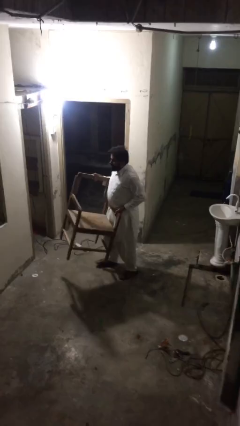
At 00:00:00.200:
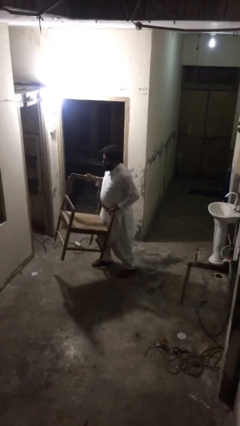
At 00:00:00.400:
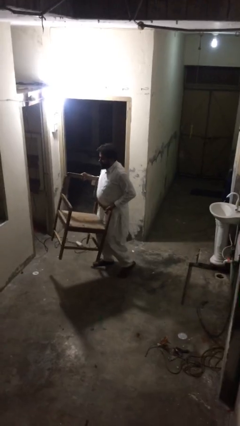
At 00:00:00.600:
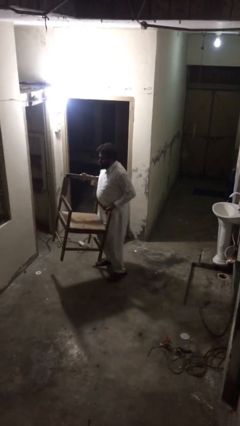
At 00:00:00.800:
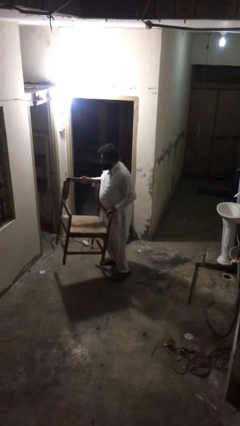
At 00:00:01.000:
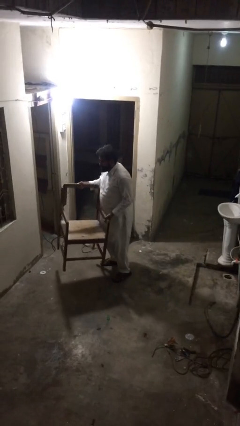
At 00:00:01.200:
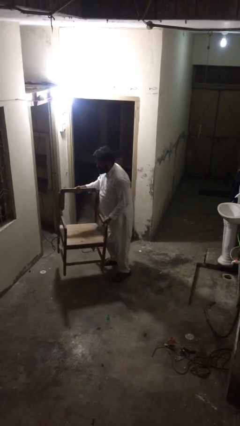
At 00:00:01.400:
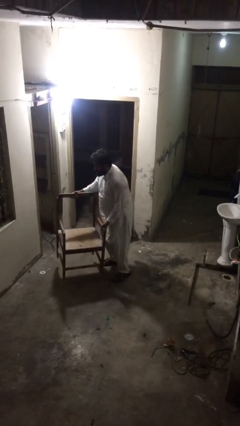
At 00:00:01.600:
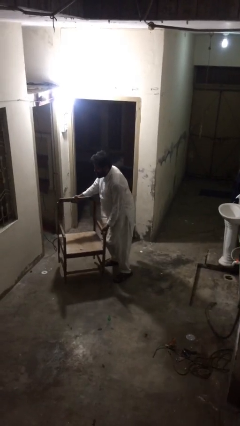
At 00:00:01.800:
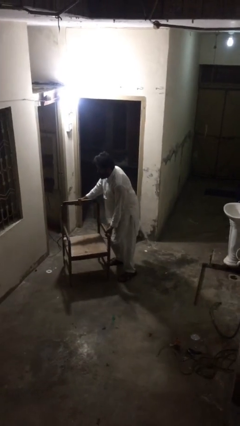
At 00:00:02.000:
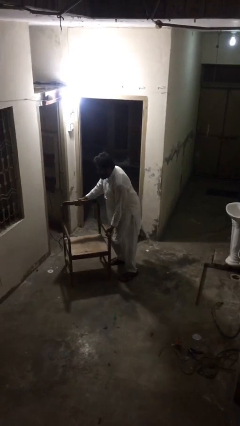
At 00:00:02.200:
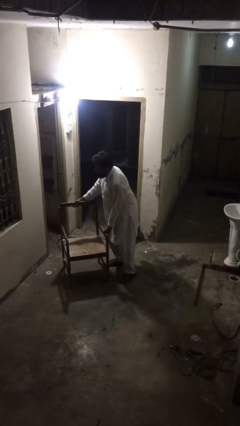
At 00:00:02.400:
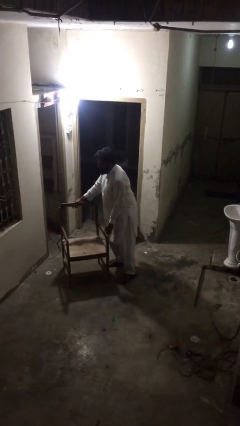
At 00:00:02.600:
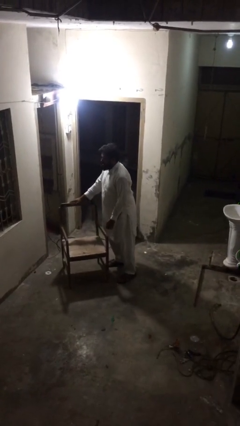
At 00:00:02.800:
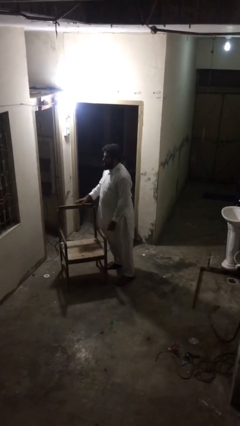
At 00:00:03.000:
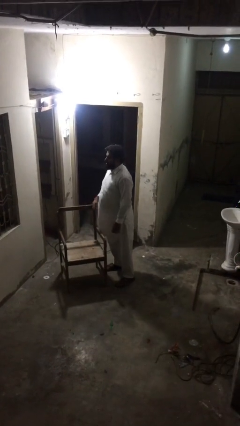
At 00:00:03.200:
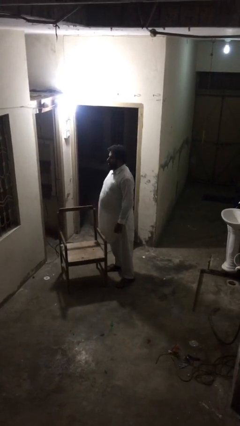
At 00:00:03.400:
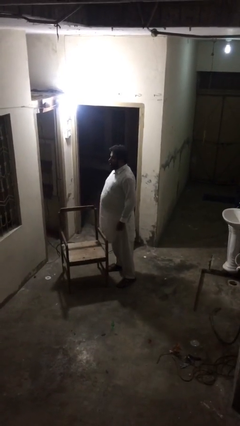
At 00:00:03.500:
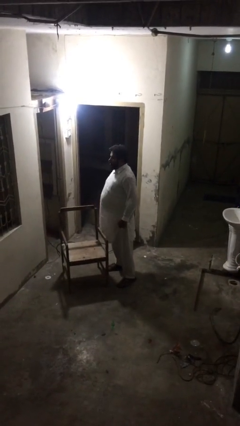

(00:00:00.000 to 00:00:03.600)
person puts down object on floor

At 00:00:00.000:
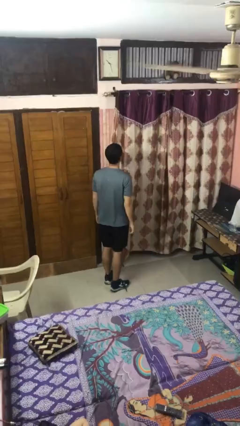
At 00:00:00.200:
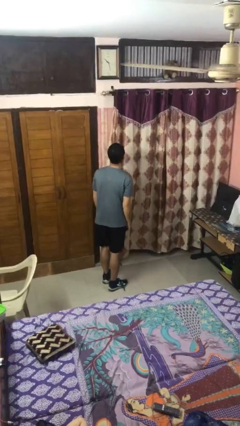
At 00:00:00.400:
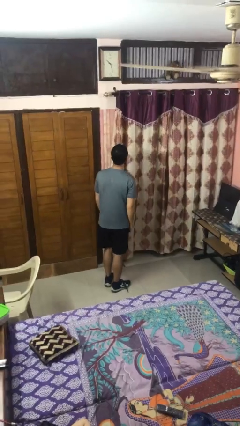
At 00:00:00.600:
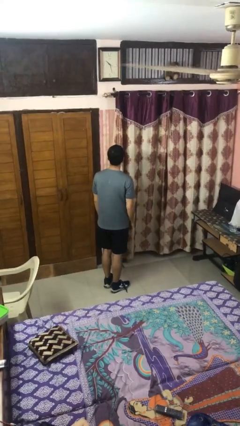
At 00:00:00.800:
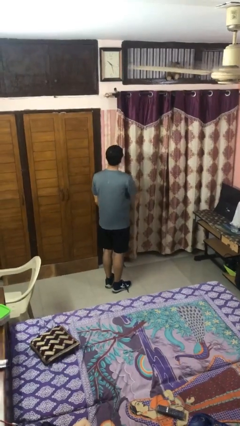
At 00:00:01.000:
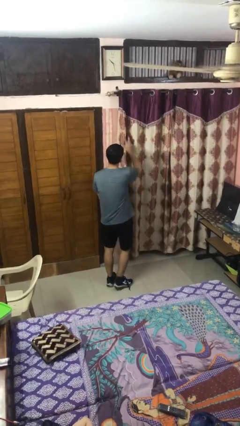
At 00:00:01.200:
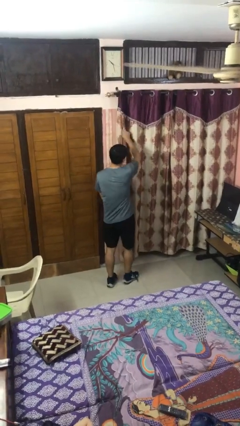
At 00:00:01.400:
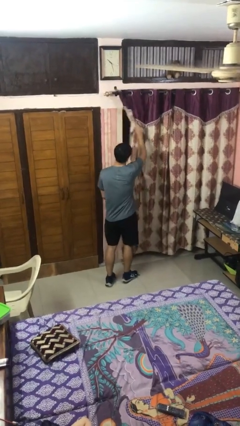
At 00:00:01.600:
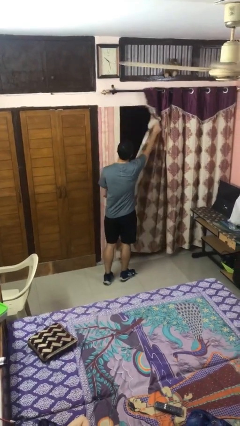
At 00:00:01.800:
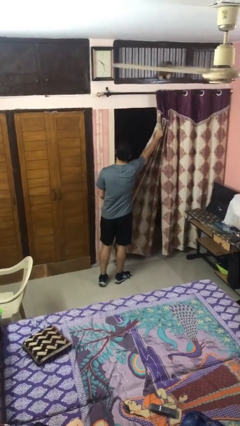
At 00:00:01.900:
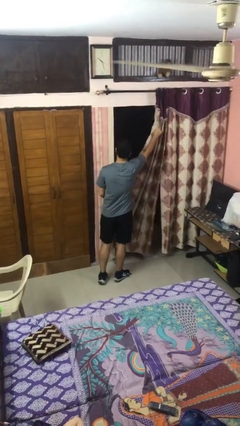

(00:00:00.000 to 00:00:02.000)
person opens curtains

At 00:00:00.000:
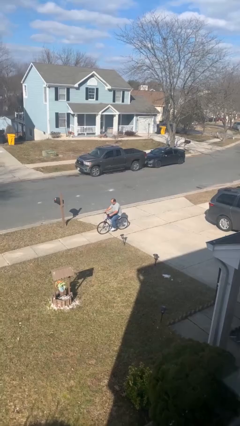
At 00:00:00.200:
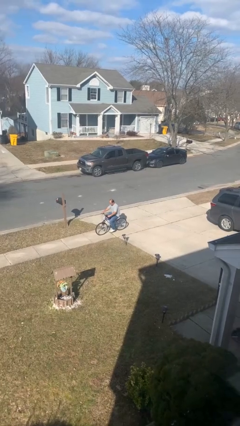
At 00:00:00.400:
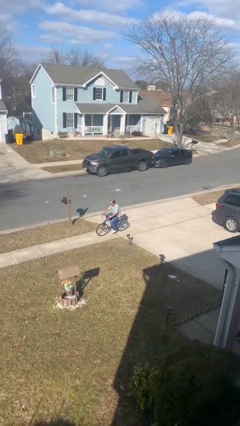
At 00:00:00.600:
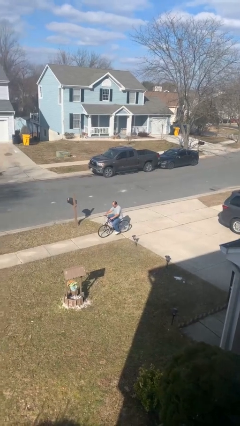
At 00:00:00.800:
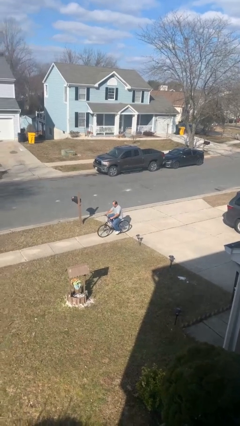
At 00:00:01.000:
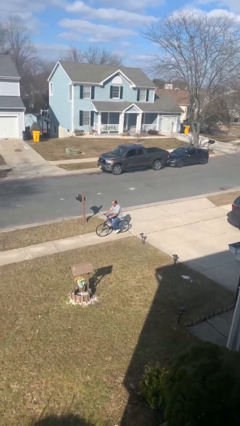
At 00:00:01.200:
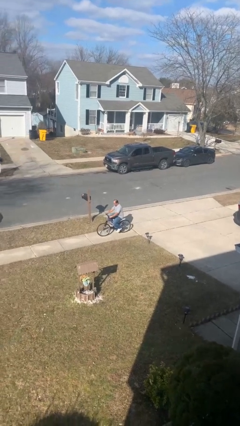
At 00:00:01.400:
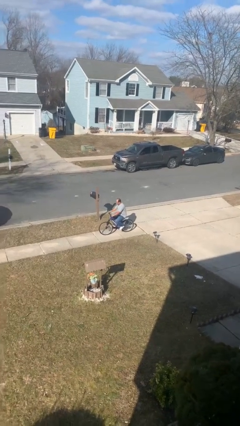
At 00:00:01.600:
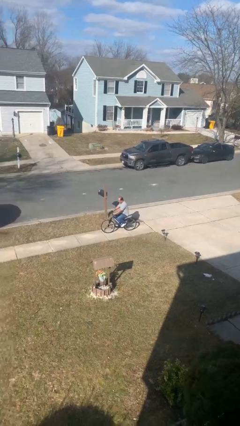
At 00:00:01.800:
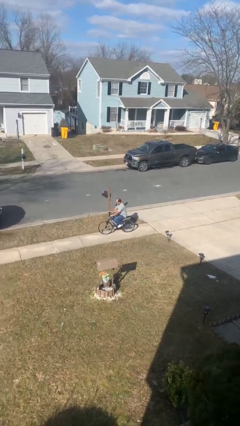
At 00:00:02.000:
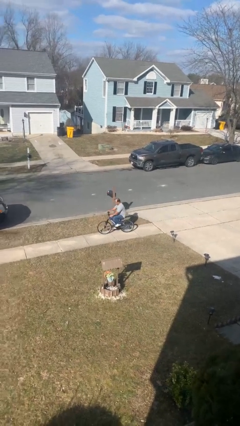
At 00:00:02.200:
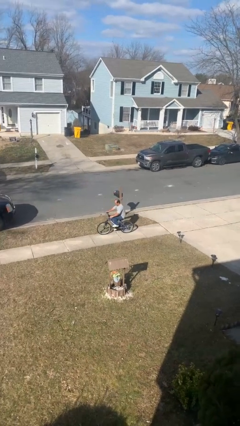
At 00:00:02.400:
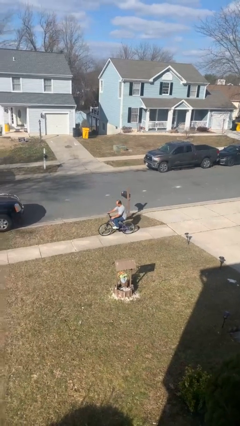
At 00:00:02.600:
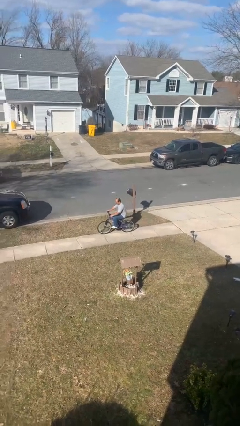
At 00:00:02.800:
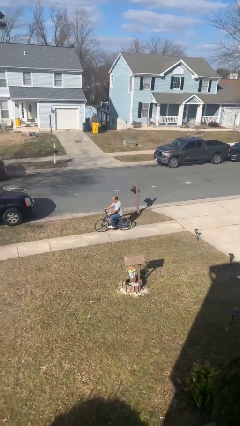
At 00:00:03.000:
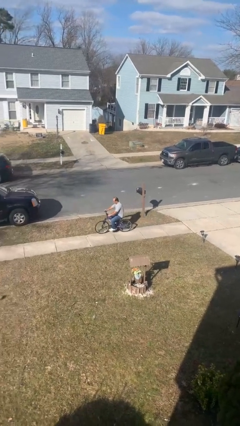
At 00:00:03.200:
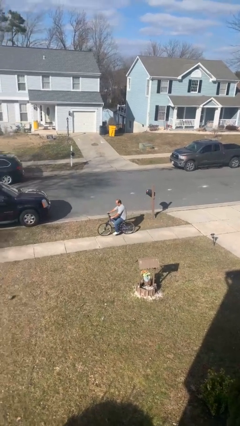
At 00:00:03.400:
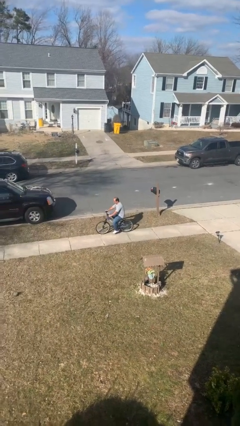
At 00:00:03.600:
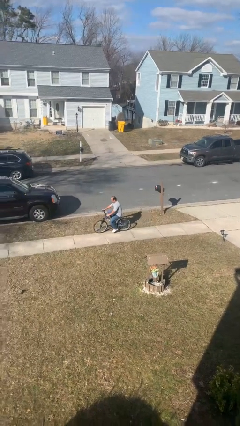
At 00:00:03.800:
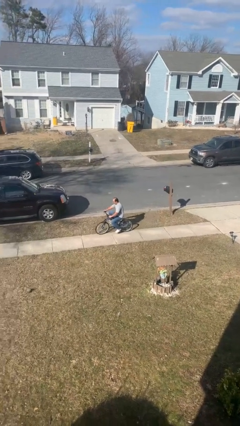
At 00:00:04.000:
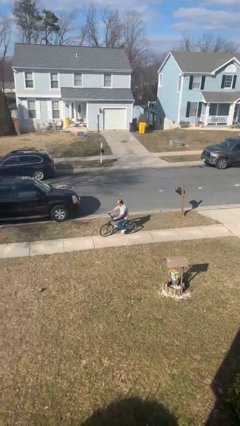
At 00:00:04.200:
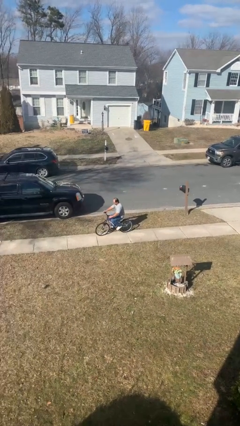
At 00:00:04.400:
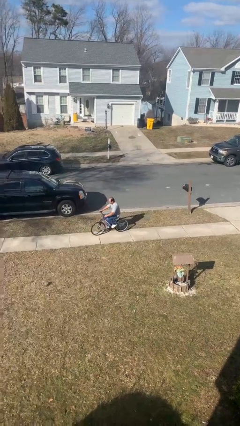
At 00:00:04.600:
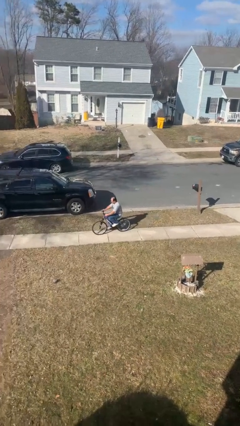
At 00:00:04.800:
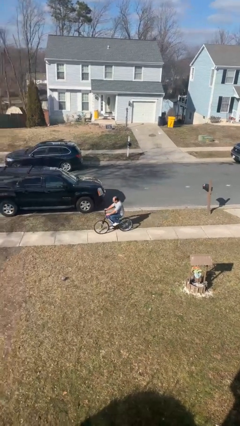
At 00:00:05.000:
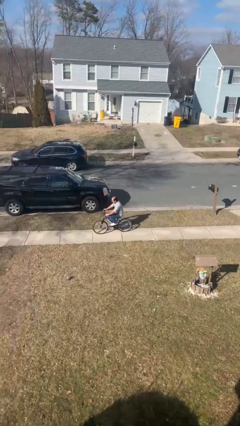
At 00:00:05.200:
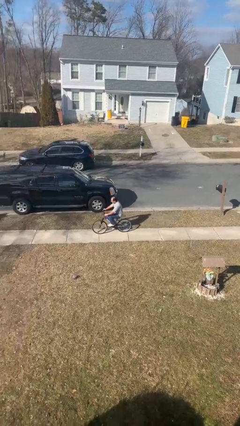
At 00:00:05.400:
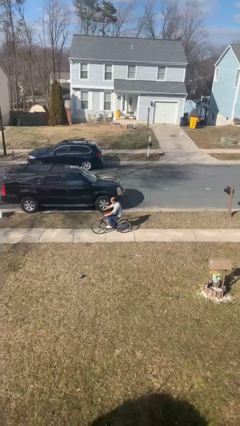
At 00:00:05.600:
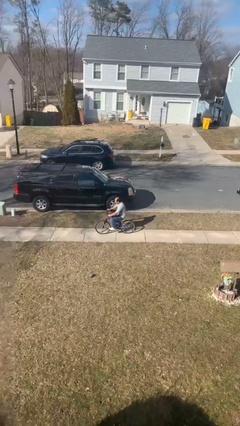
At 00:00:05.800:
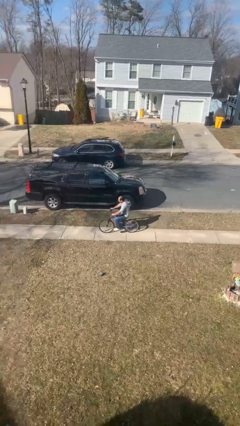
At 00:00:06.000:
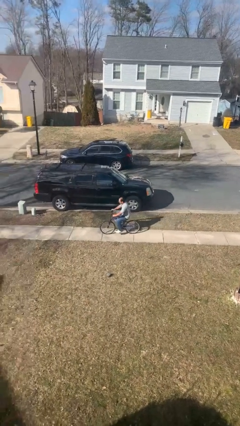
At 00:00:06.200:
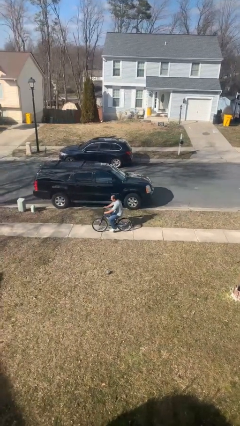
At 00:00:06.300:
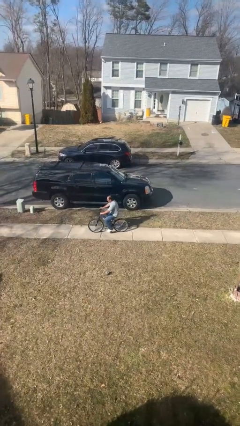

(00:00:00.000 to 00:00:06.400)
person rides bicycle

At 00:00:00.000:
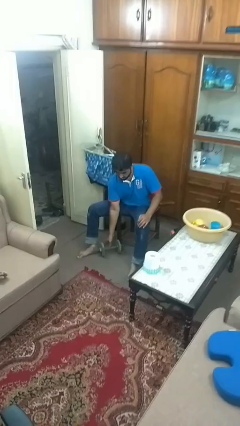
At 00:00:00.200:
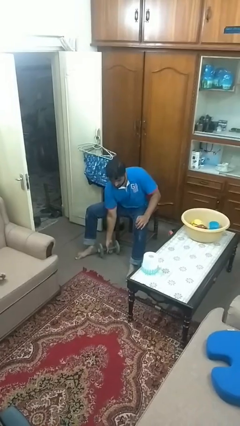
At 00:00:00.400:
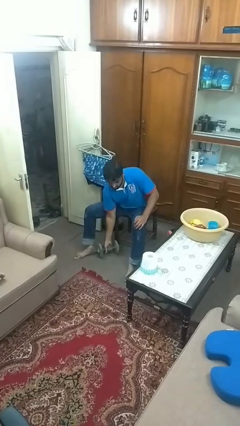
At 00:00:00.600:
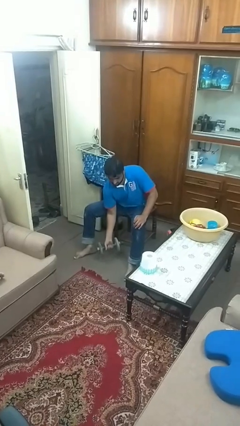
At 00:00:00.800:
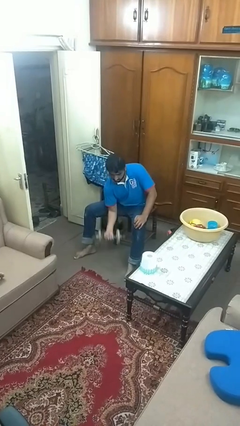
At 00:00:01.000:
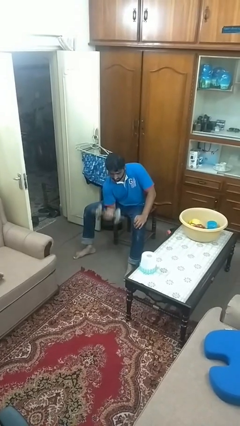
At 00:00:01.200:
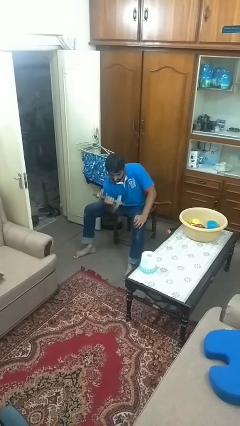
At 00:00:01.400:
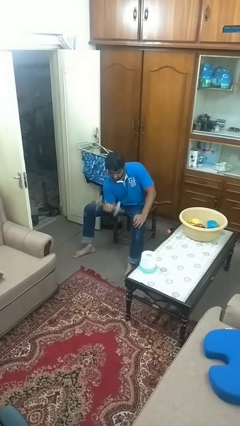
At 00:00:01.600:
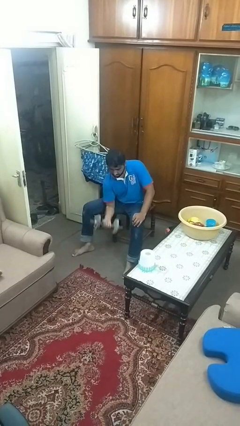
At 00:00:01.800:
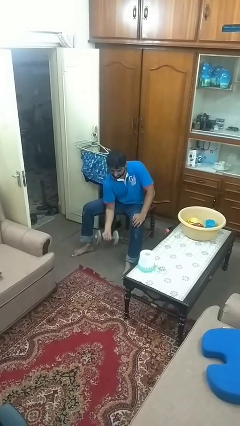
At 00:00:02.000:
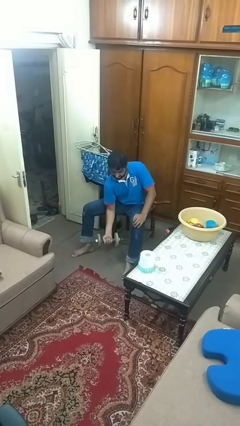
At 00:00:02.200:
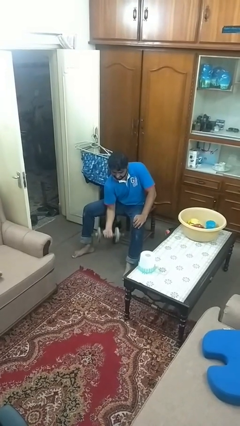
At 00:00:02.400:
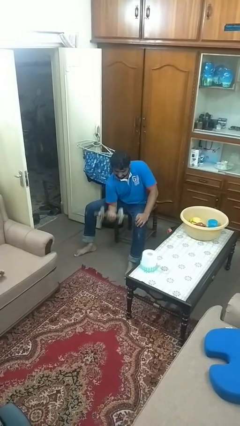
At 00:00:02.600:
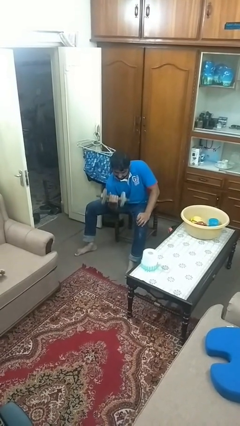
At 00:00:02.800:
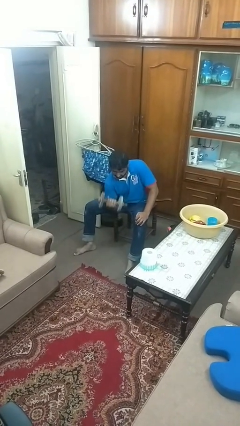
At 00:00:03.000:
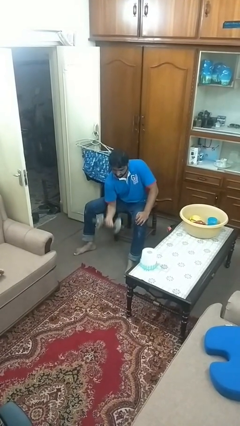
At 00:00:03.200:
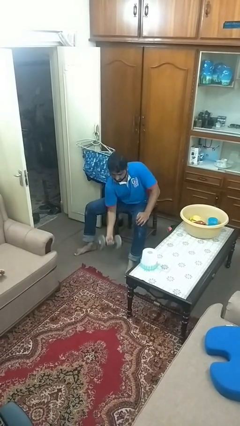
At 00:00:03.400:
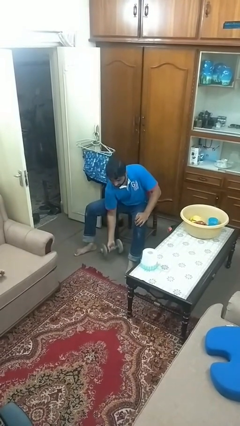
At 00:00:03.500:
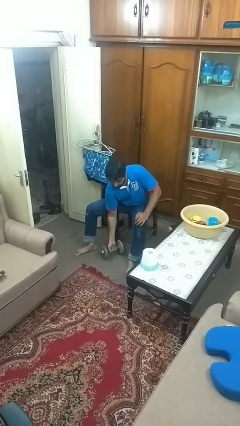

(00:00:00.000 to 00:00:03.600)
person lifts dumbbells

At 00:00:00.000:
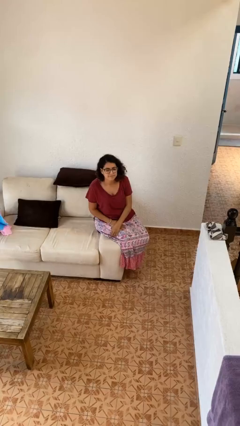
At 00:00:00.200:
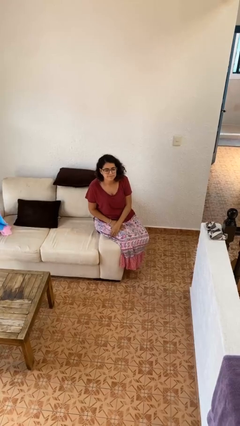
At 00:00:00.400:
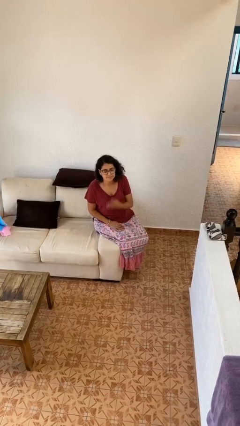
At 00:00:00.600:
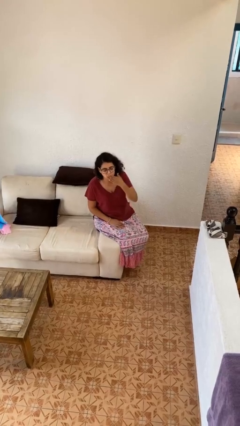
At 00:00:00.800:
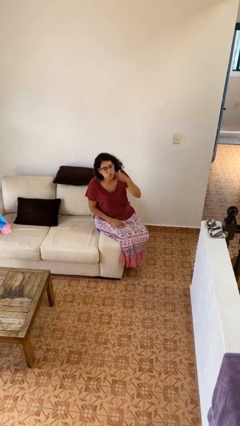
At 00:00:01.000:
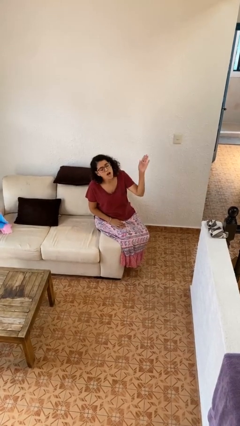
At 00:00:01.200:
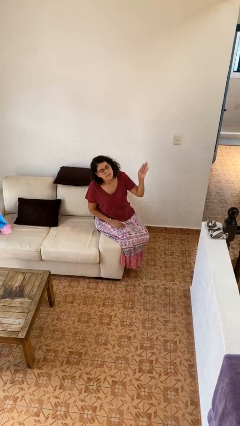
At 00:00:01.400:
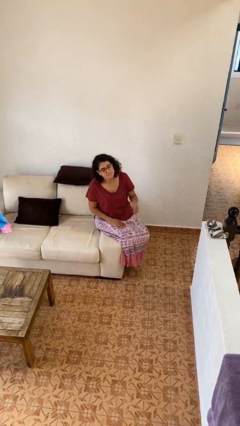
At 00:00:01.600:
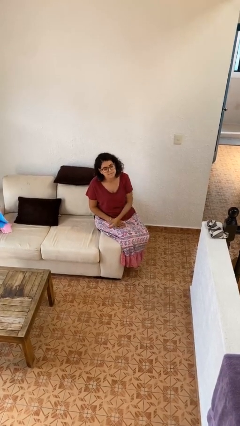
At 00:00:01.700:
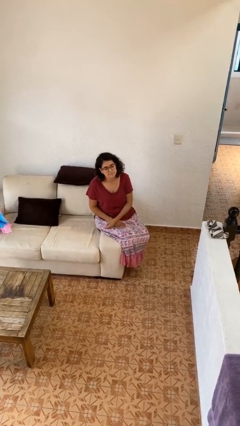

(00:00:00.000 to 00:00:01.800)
person gestures blow kiss
